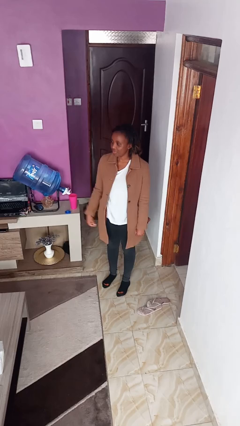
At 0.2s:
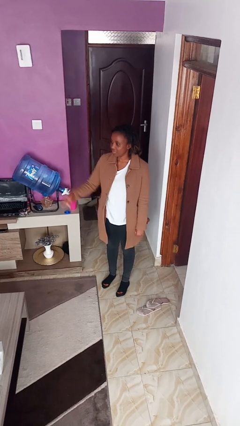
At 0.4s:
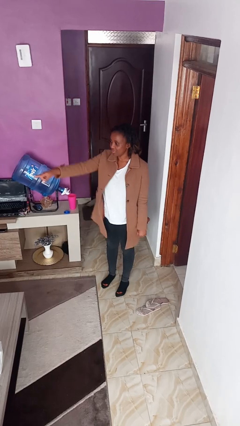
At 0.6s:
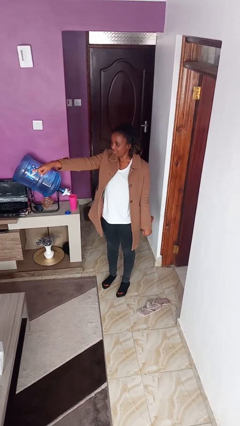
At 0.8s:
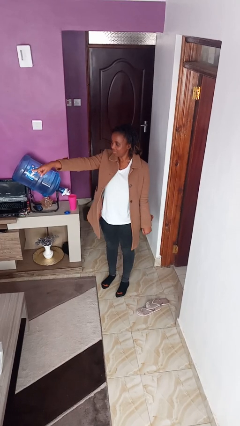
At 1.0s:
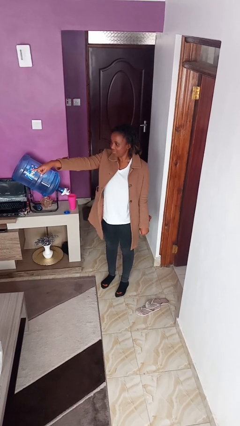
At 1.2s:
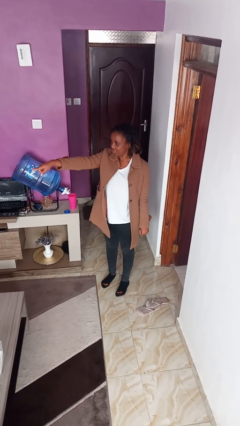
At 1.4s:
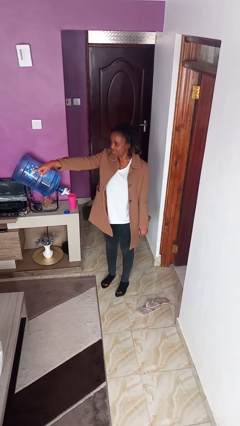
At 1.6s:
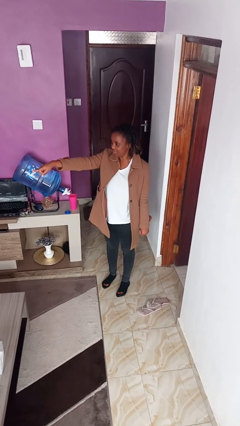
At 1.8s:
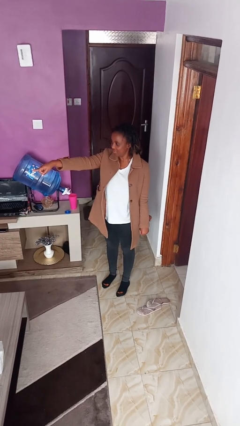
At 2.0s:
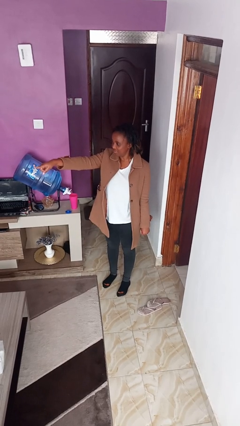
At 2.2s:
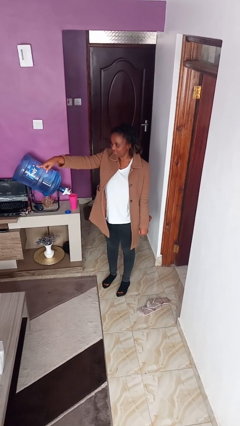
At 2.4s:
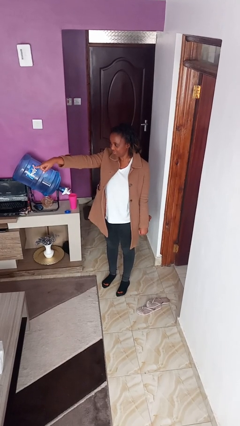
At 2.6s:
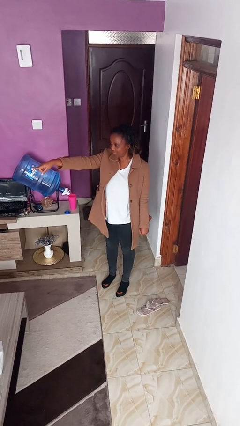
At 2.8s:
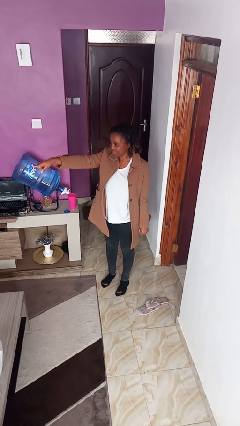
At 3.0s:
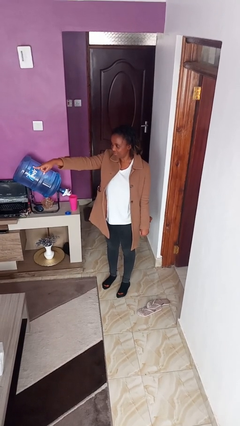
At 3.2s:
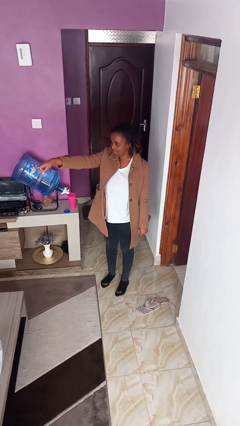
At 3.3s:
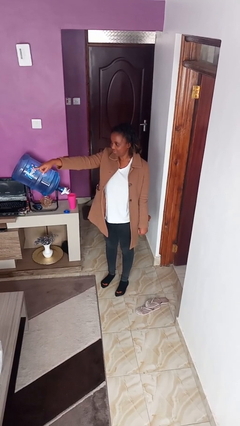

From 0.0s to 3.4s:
person points at person

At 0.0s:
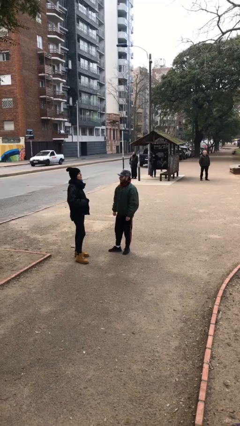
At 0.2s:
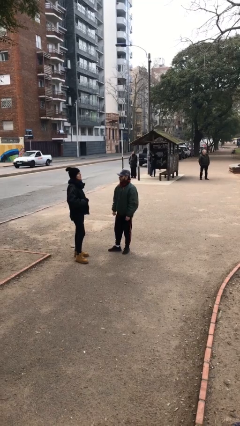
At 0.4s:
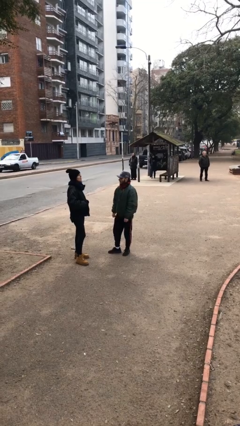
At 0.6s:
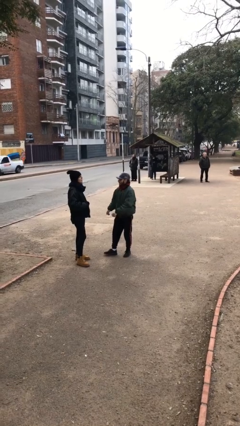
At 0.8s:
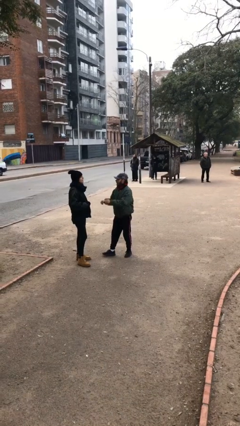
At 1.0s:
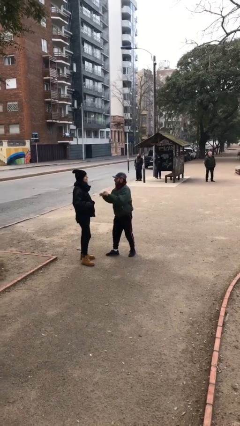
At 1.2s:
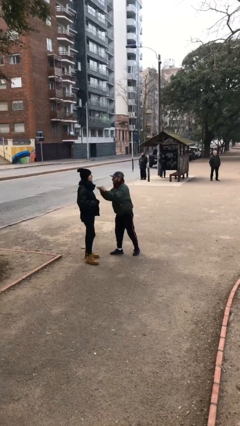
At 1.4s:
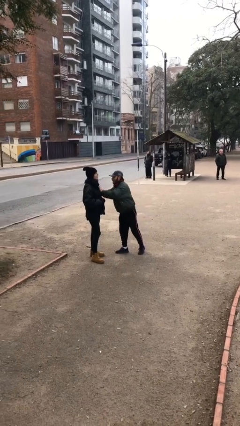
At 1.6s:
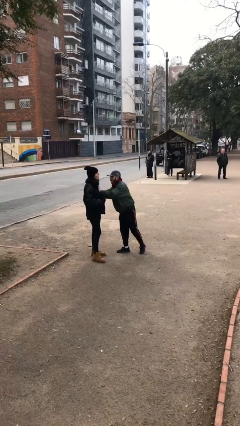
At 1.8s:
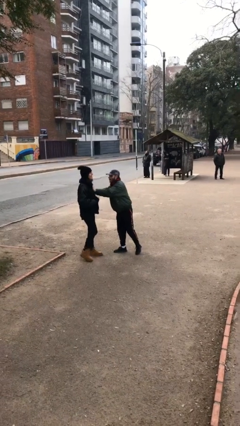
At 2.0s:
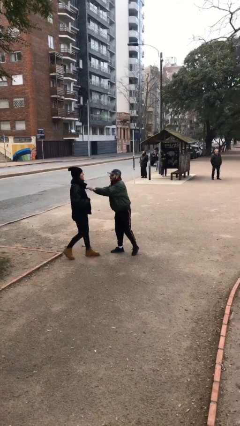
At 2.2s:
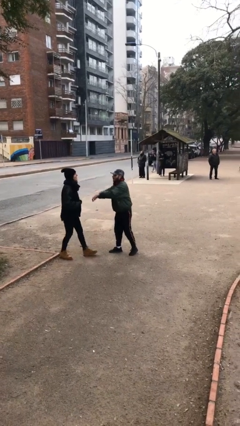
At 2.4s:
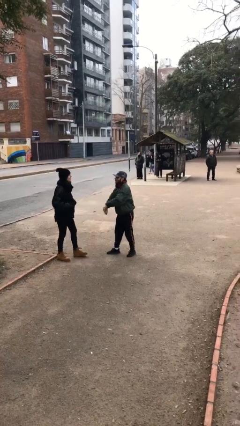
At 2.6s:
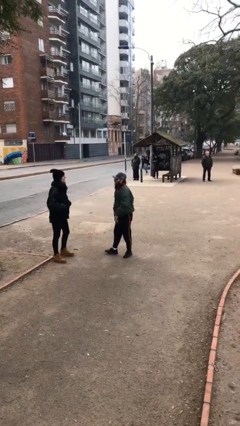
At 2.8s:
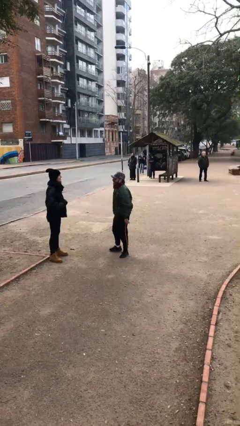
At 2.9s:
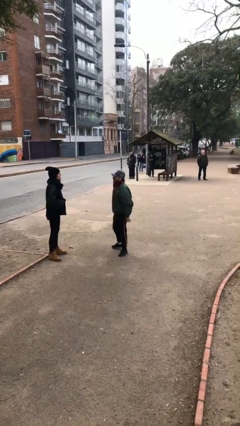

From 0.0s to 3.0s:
person shoves person

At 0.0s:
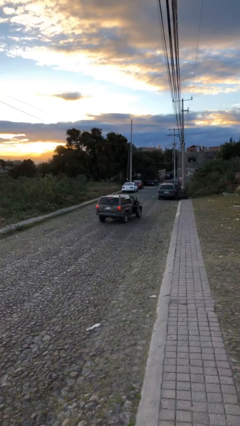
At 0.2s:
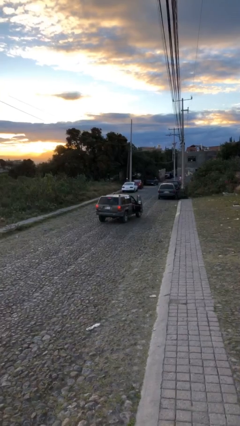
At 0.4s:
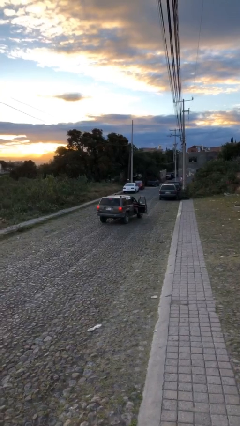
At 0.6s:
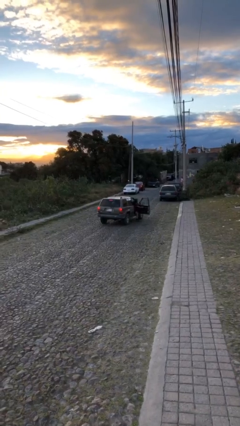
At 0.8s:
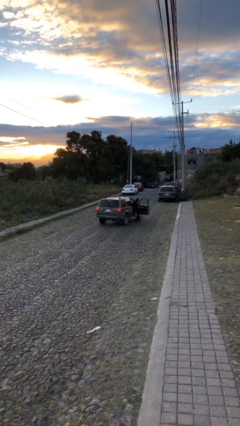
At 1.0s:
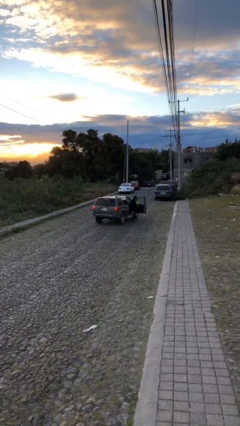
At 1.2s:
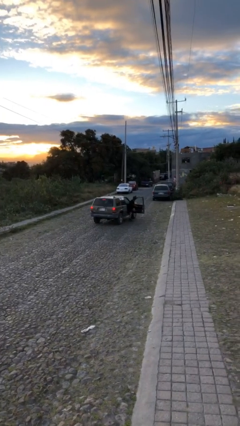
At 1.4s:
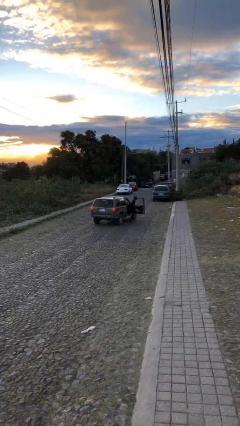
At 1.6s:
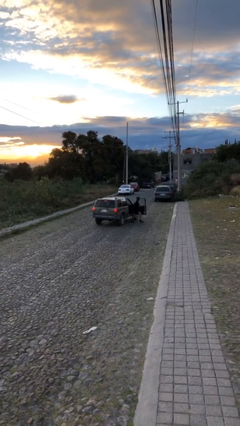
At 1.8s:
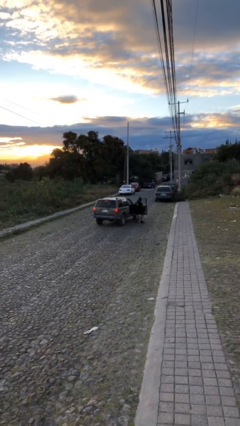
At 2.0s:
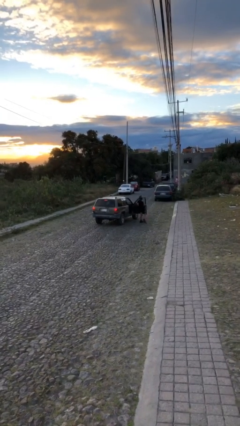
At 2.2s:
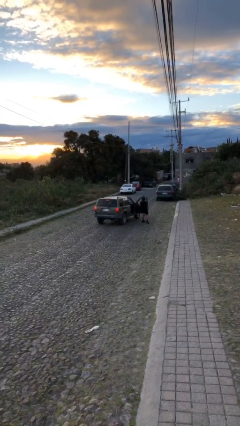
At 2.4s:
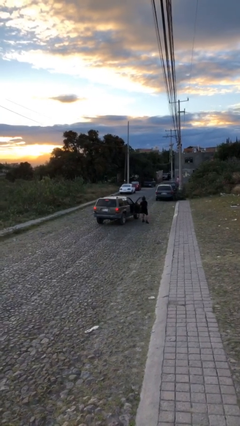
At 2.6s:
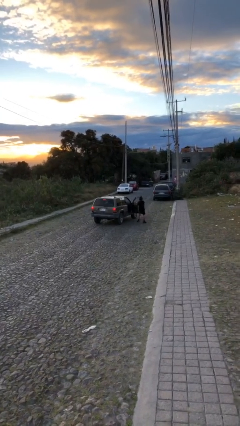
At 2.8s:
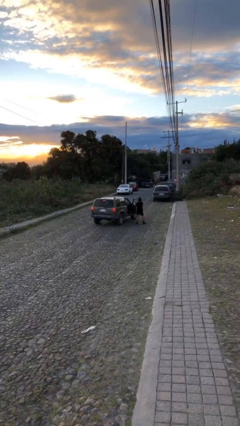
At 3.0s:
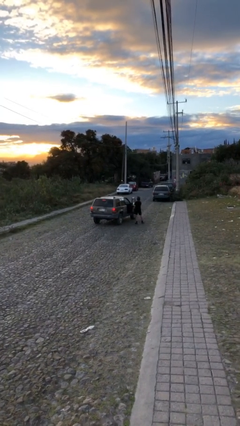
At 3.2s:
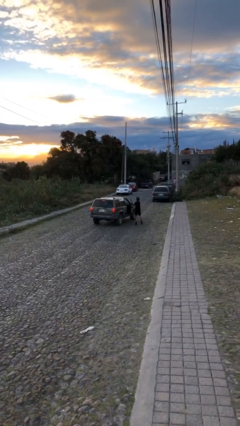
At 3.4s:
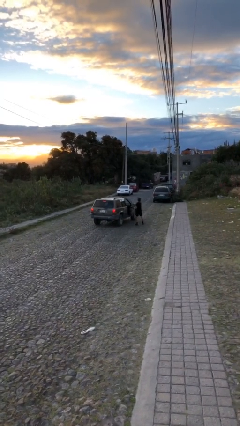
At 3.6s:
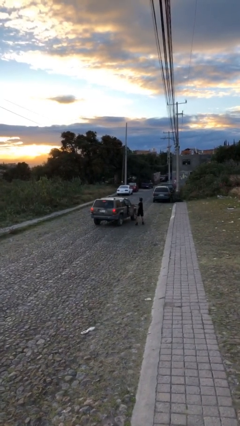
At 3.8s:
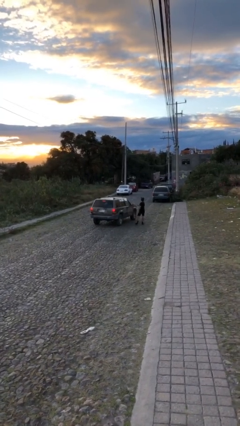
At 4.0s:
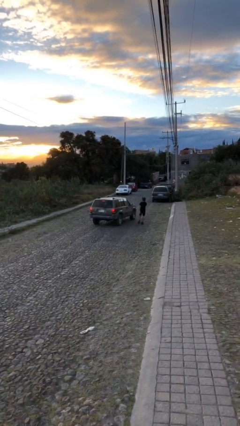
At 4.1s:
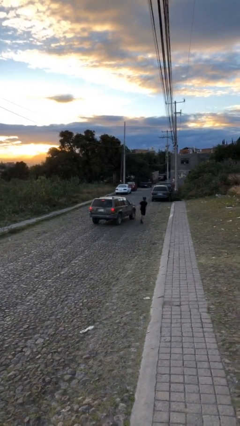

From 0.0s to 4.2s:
car drops off person

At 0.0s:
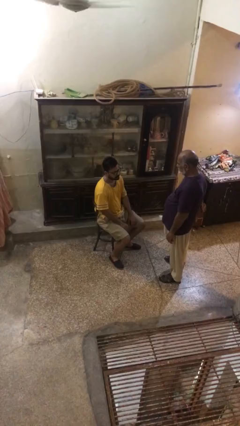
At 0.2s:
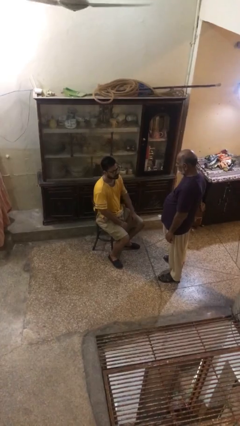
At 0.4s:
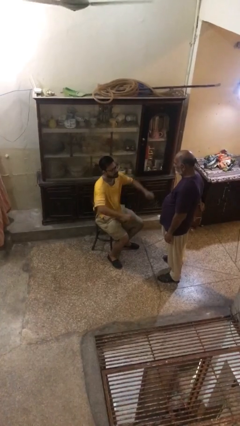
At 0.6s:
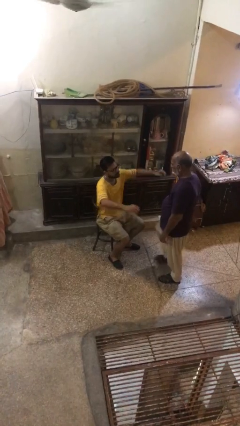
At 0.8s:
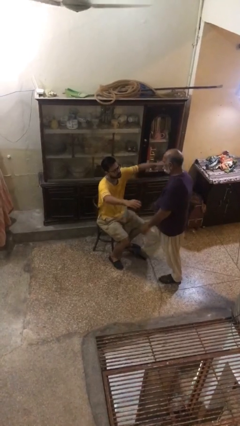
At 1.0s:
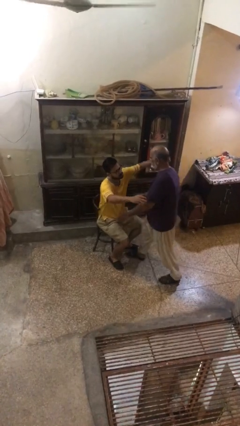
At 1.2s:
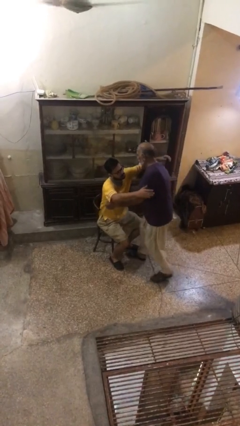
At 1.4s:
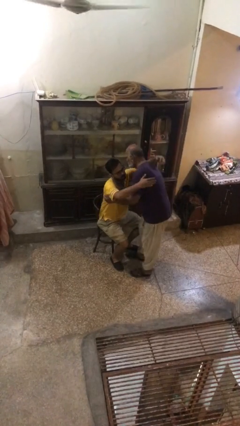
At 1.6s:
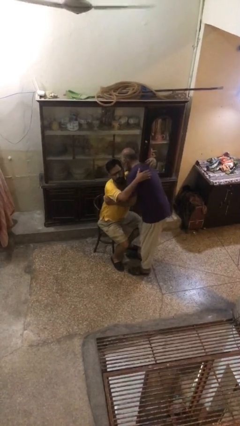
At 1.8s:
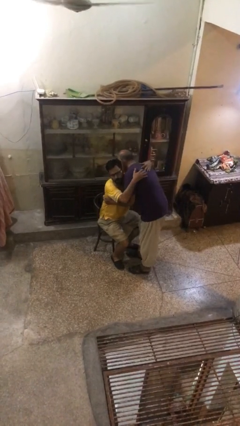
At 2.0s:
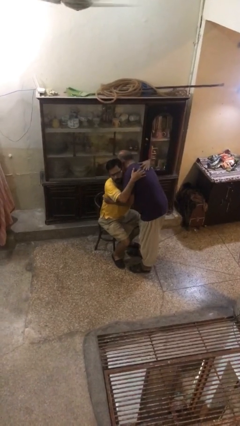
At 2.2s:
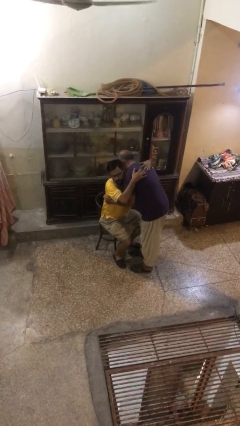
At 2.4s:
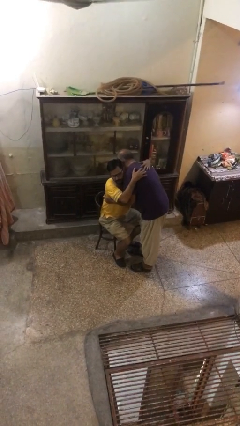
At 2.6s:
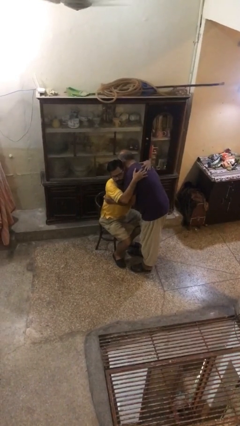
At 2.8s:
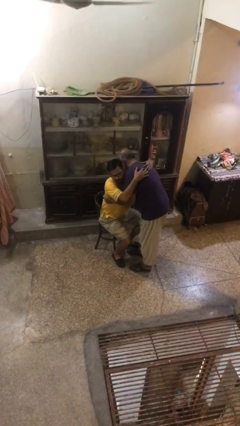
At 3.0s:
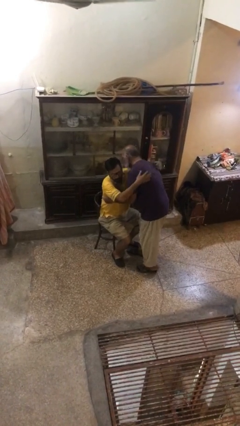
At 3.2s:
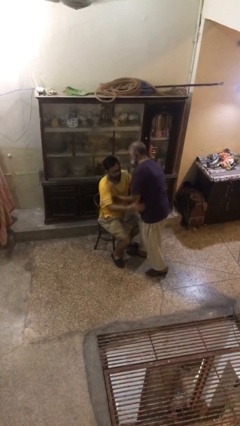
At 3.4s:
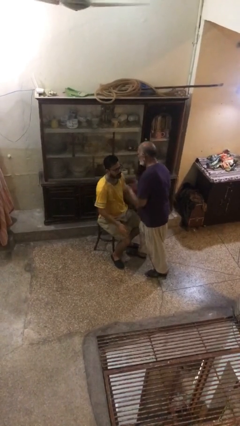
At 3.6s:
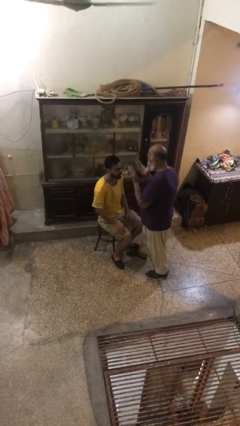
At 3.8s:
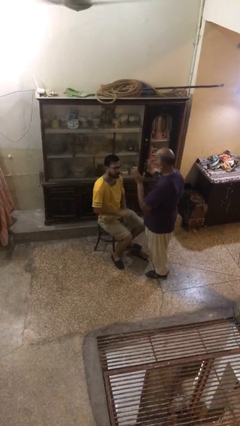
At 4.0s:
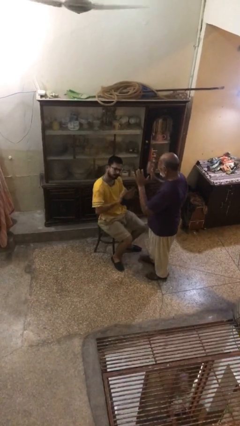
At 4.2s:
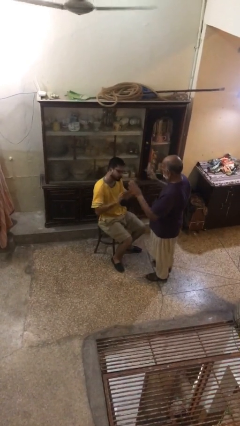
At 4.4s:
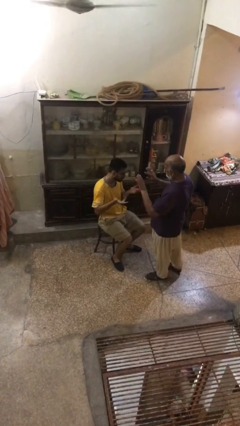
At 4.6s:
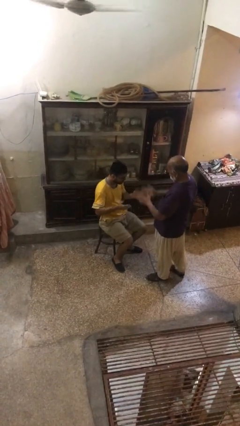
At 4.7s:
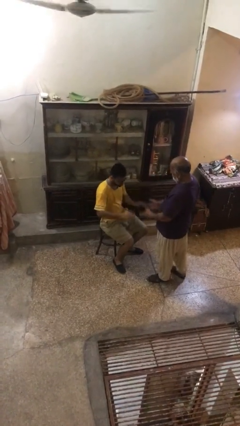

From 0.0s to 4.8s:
person embraces person

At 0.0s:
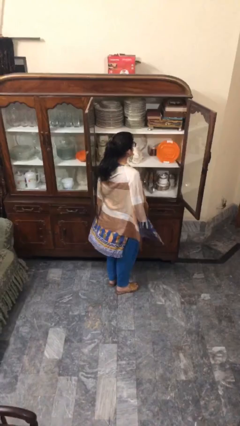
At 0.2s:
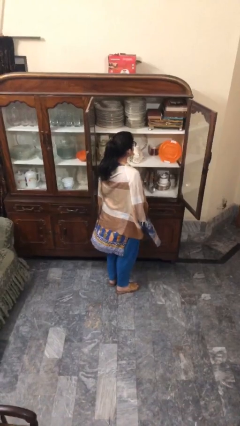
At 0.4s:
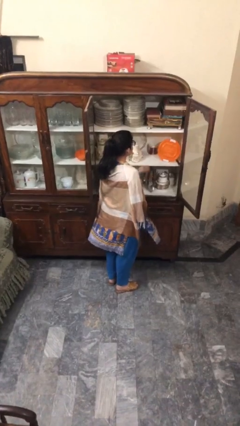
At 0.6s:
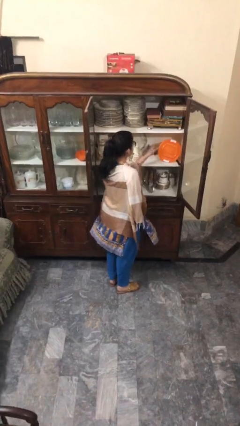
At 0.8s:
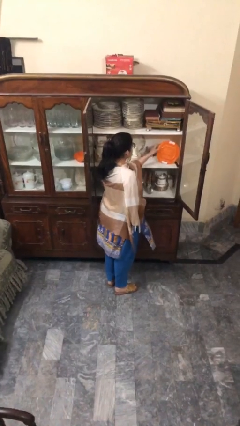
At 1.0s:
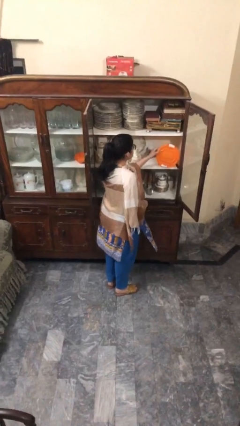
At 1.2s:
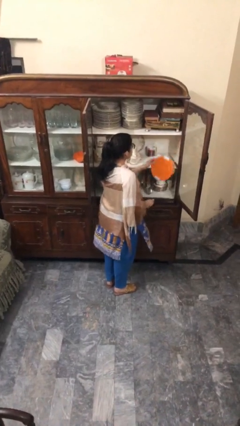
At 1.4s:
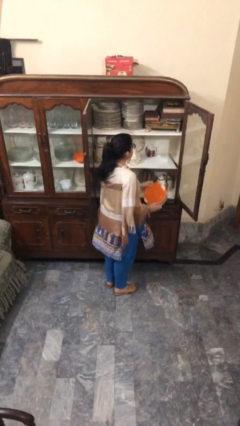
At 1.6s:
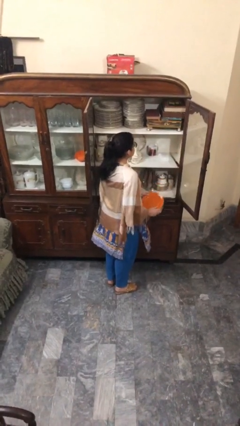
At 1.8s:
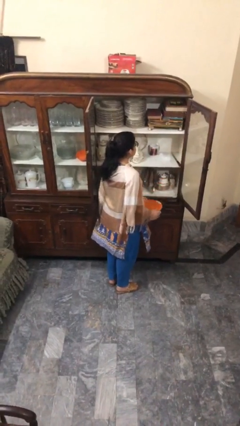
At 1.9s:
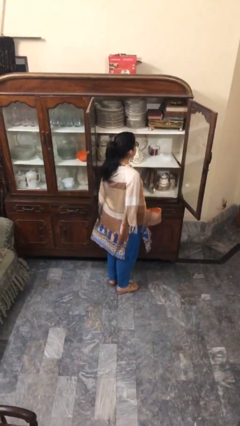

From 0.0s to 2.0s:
person takes object from cabinet
